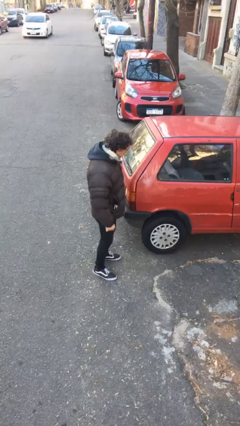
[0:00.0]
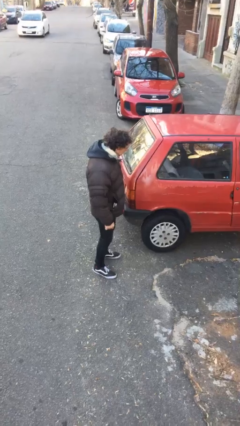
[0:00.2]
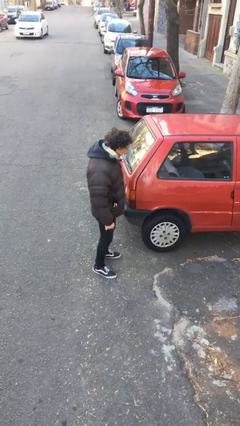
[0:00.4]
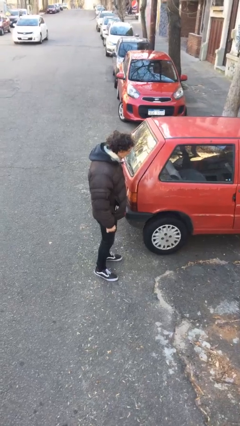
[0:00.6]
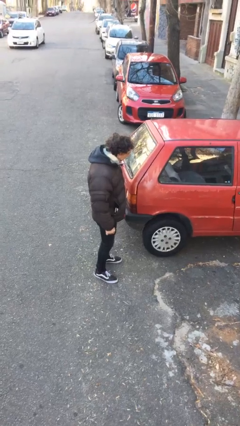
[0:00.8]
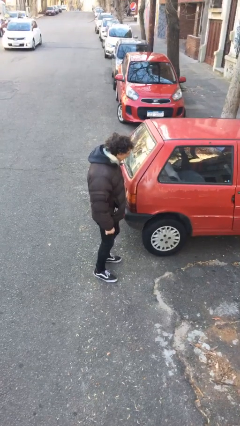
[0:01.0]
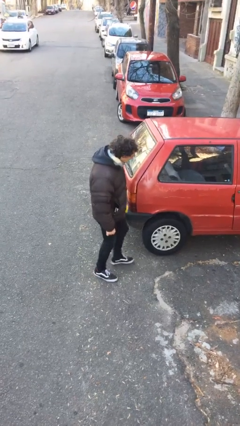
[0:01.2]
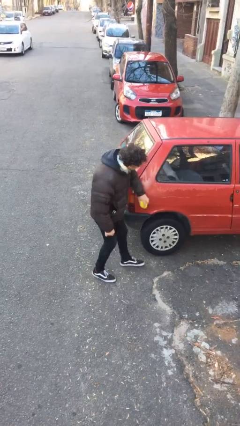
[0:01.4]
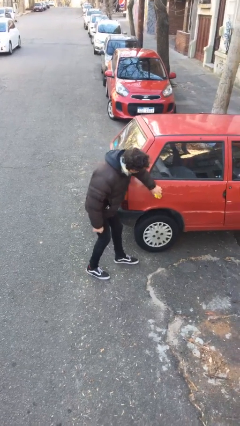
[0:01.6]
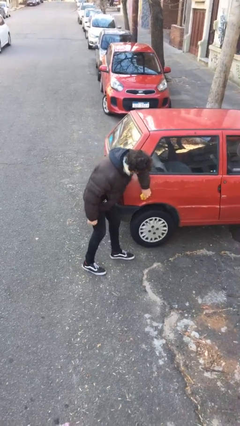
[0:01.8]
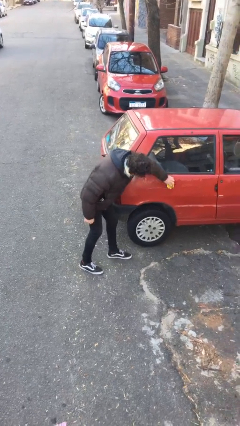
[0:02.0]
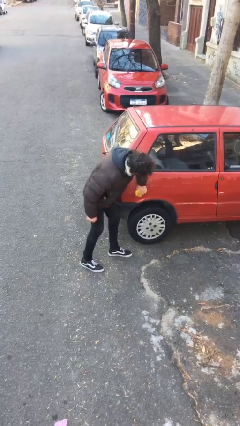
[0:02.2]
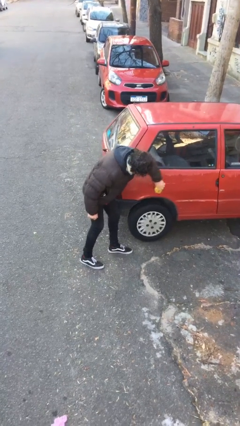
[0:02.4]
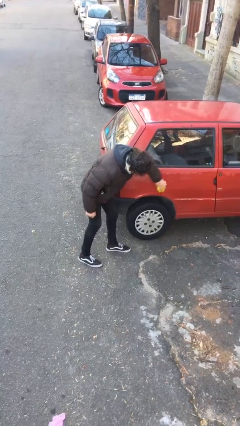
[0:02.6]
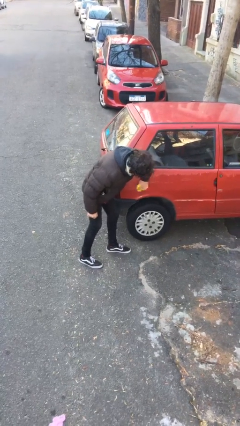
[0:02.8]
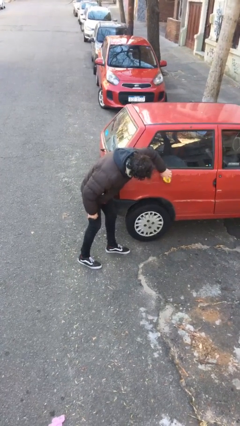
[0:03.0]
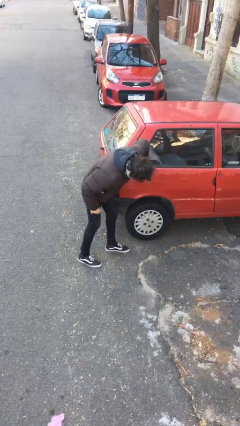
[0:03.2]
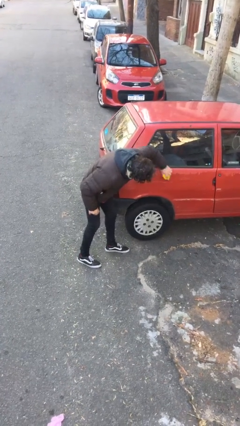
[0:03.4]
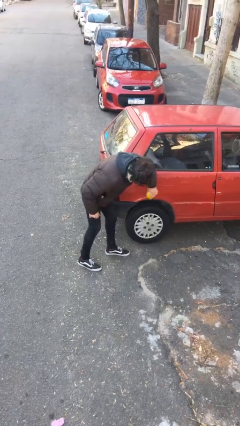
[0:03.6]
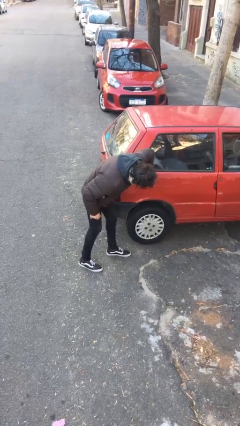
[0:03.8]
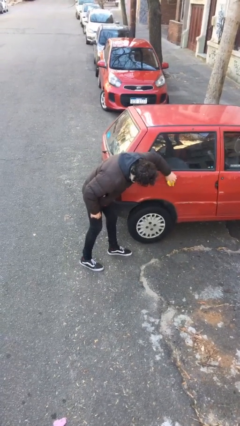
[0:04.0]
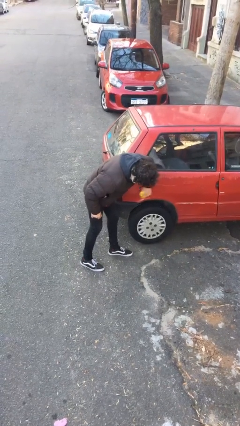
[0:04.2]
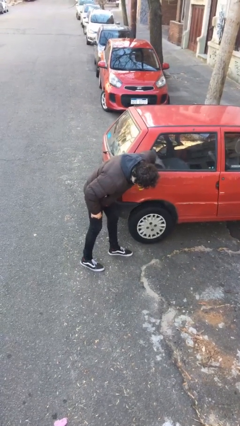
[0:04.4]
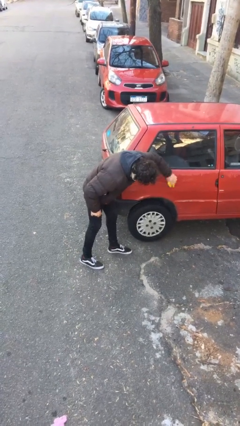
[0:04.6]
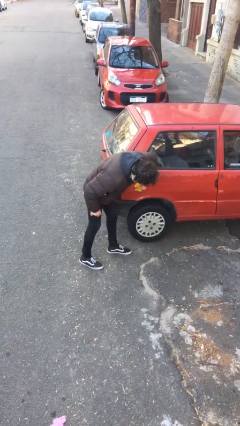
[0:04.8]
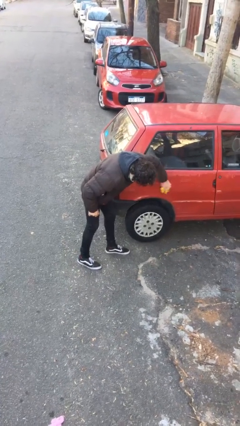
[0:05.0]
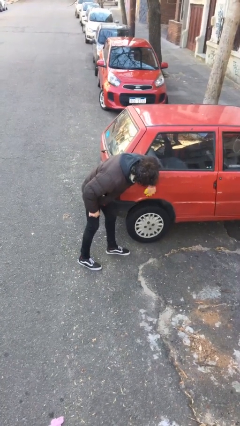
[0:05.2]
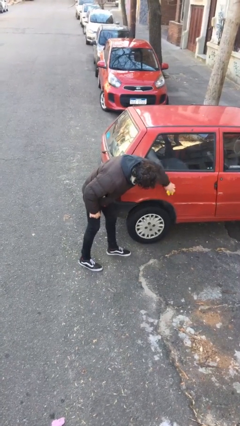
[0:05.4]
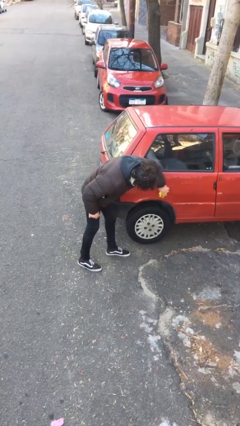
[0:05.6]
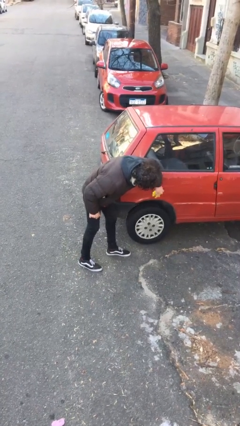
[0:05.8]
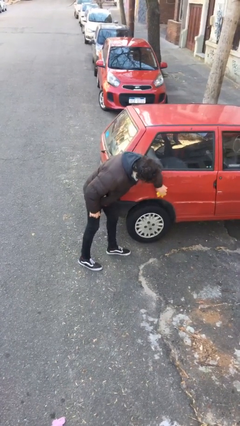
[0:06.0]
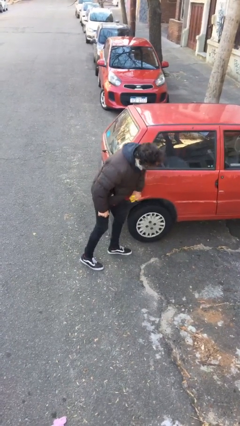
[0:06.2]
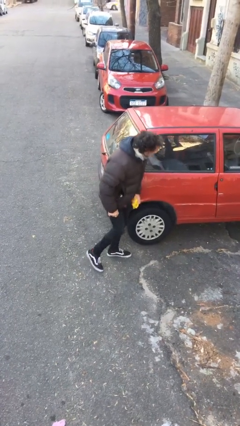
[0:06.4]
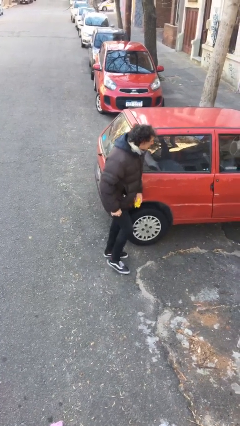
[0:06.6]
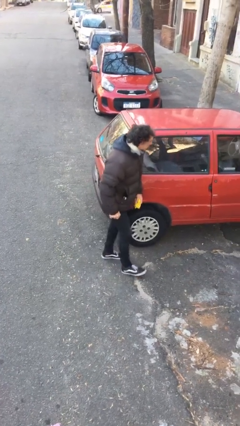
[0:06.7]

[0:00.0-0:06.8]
person polishes car with rag

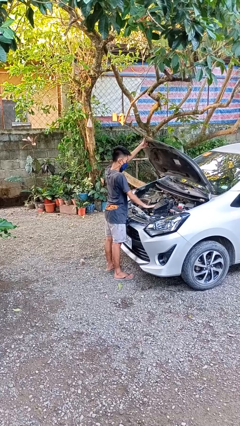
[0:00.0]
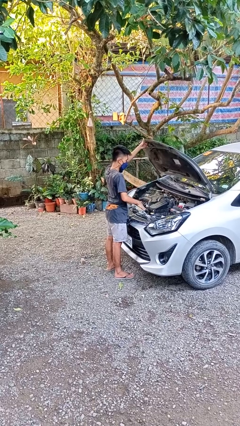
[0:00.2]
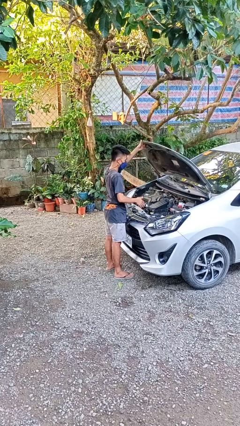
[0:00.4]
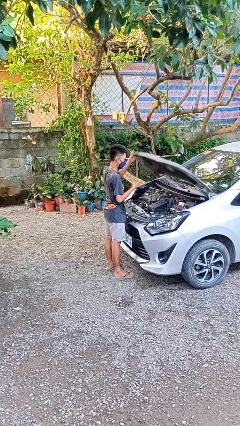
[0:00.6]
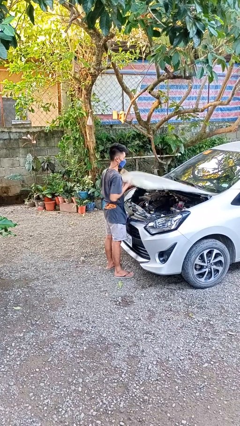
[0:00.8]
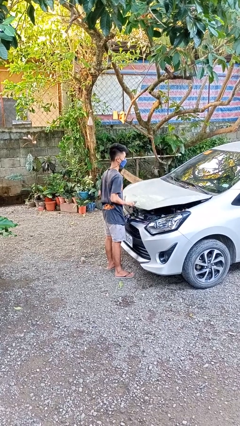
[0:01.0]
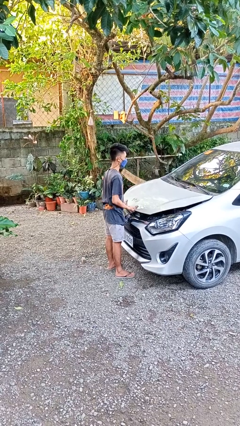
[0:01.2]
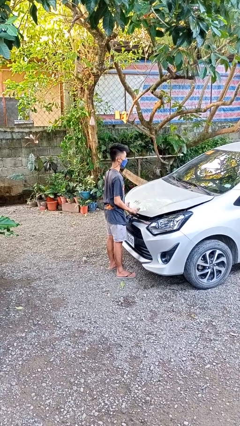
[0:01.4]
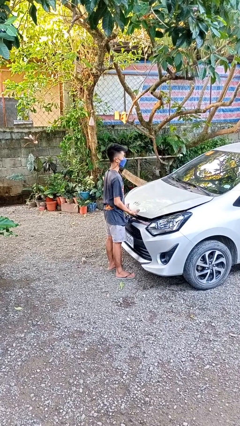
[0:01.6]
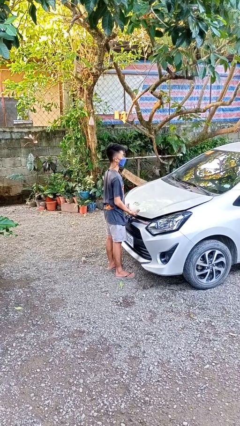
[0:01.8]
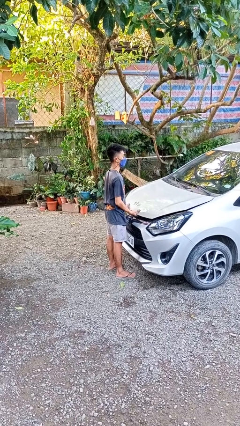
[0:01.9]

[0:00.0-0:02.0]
person closes car hood

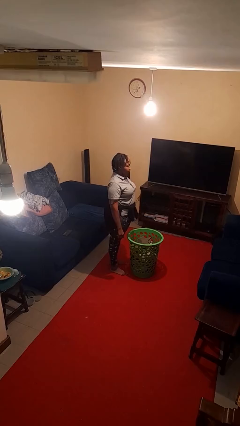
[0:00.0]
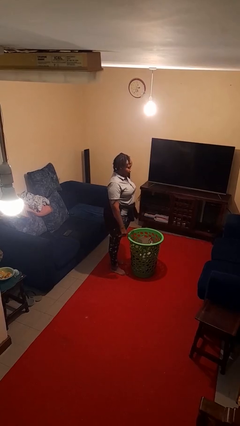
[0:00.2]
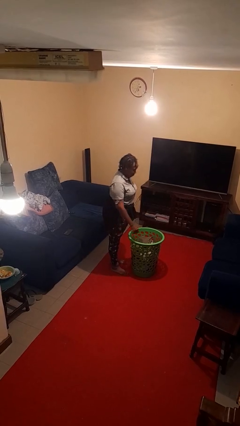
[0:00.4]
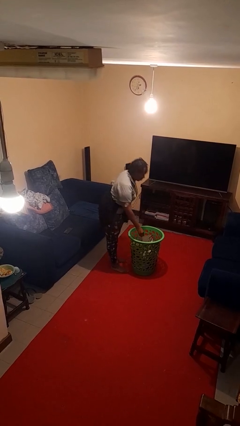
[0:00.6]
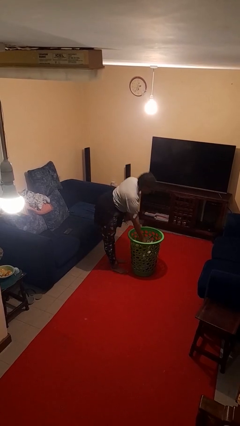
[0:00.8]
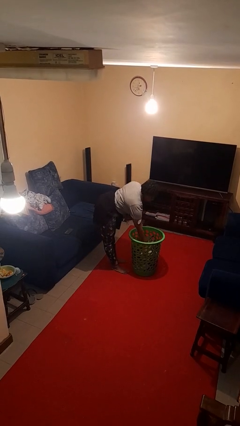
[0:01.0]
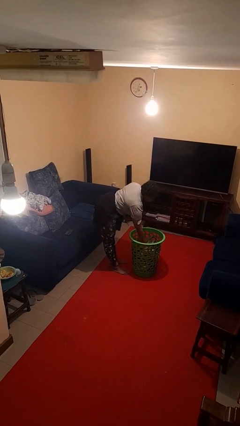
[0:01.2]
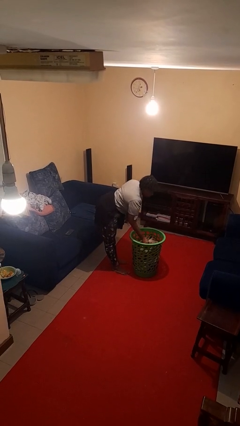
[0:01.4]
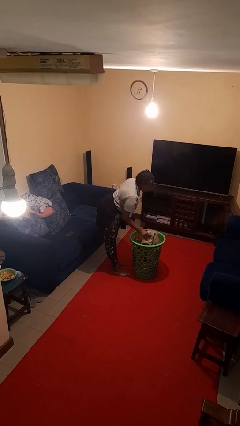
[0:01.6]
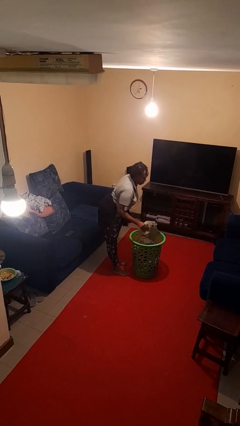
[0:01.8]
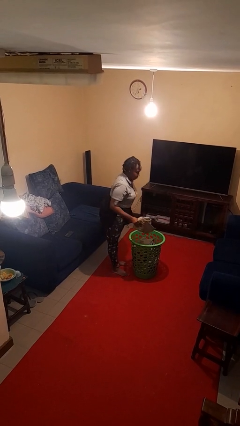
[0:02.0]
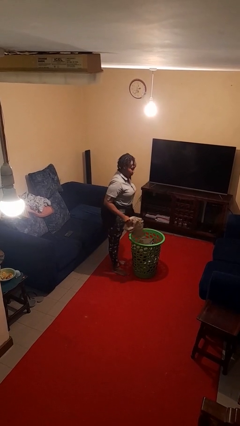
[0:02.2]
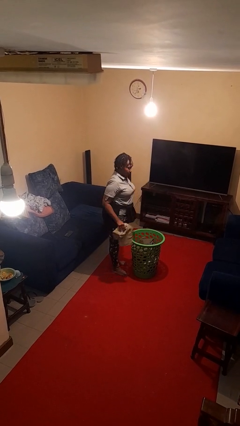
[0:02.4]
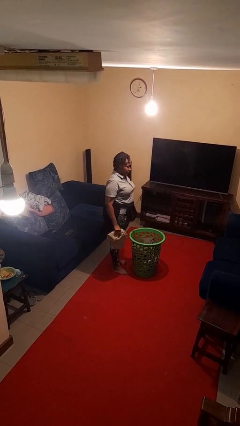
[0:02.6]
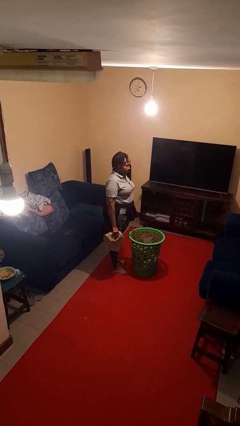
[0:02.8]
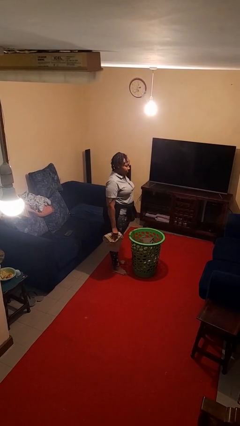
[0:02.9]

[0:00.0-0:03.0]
person takes object from basket

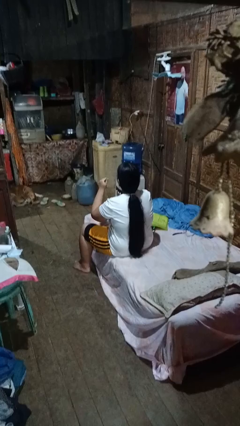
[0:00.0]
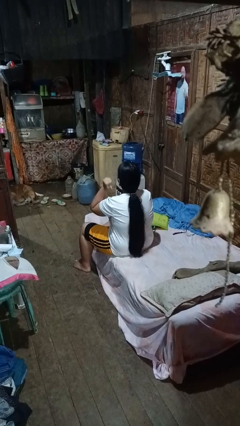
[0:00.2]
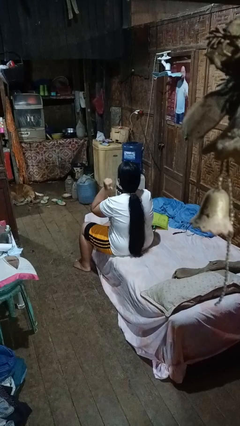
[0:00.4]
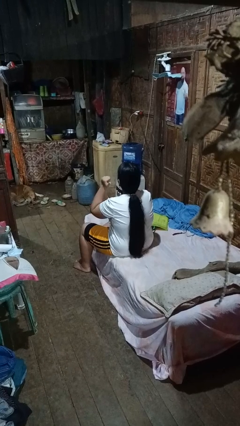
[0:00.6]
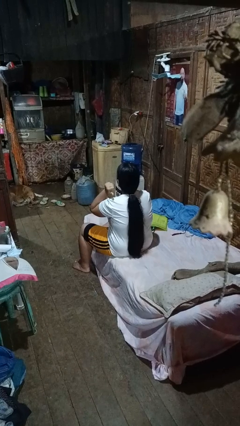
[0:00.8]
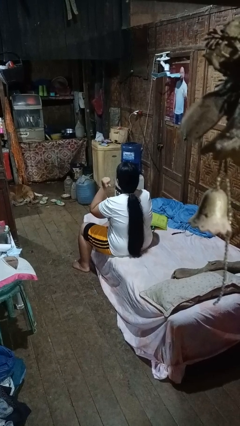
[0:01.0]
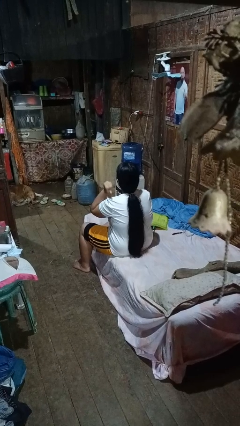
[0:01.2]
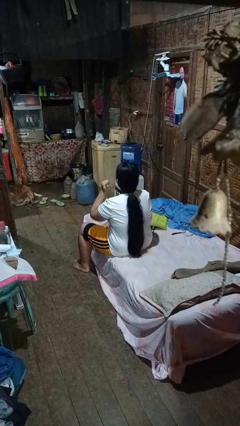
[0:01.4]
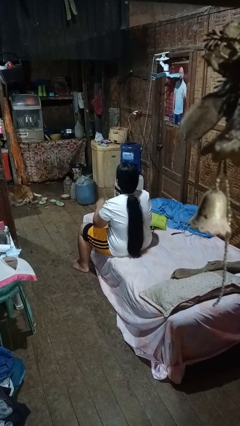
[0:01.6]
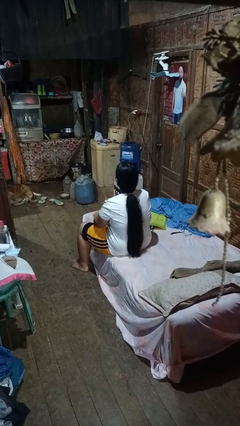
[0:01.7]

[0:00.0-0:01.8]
person gestures behind me

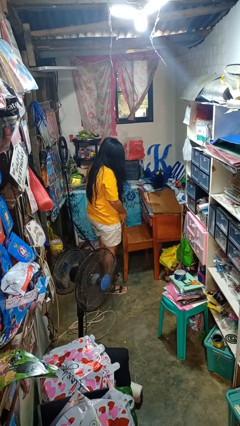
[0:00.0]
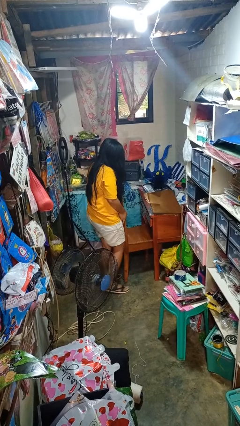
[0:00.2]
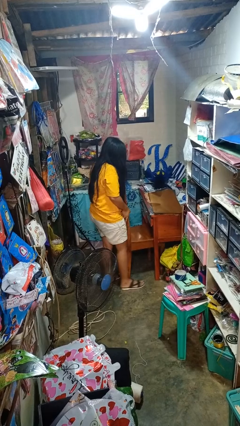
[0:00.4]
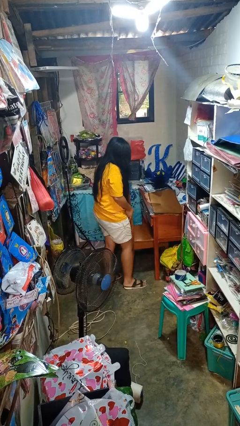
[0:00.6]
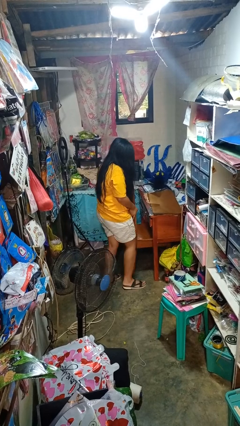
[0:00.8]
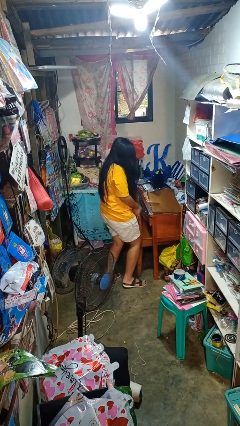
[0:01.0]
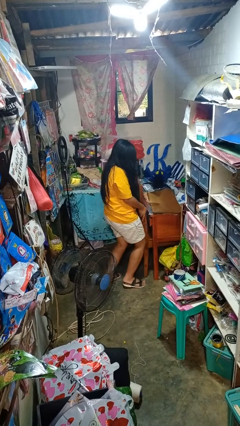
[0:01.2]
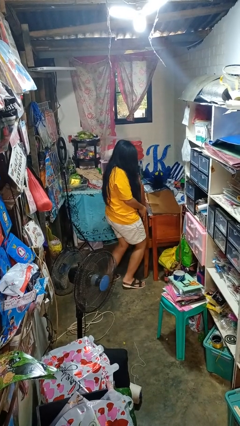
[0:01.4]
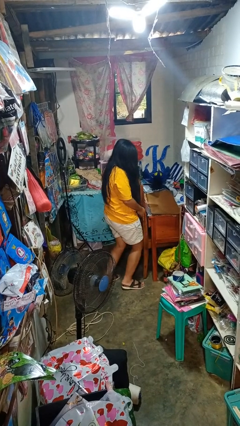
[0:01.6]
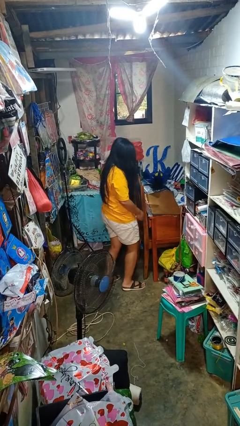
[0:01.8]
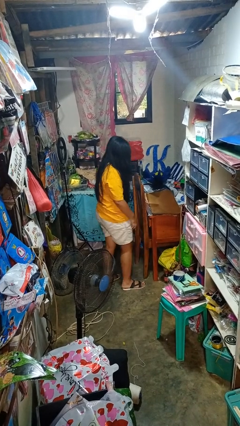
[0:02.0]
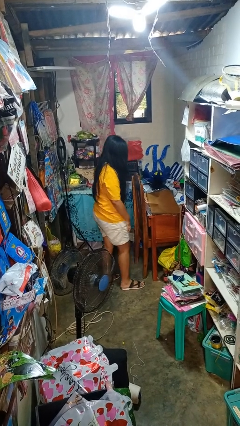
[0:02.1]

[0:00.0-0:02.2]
person pushes in chair

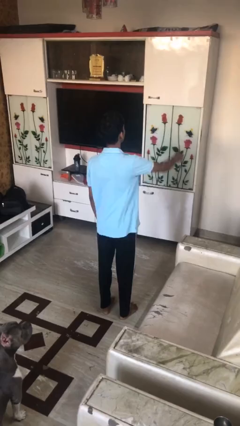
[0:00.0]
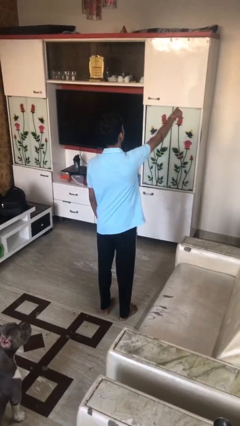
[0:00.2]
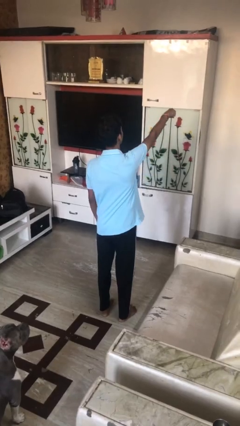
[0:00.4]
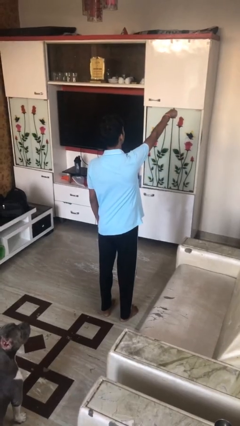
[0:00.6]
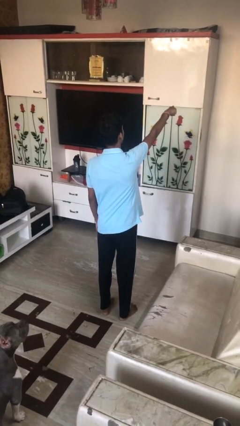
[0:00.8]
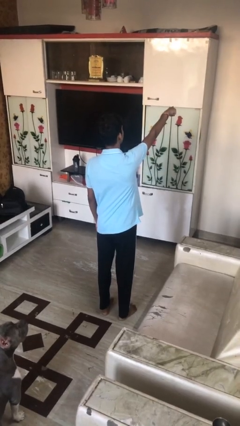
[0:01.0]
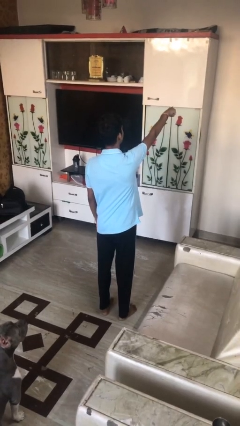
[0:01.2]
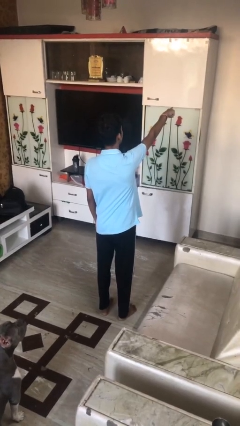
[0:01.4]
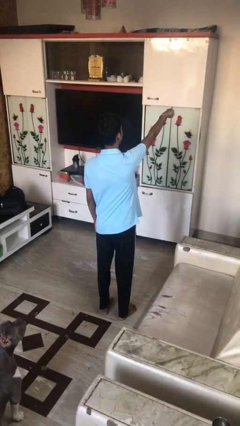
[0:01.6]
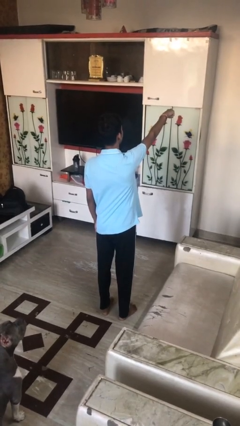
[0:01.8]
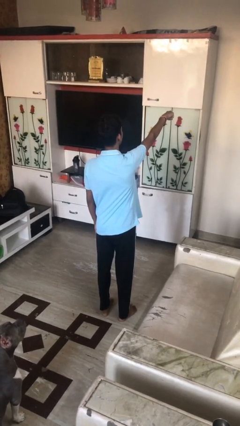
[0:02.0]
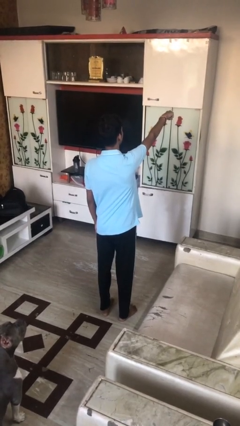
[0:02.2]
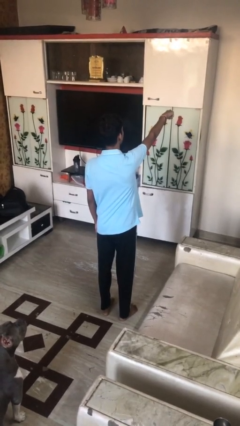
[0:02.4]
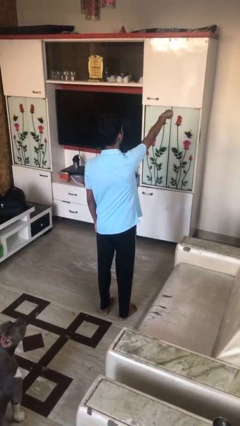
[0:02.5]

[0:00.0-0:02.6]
person points at person
